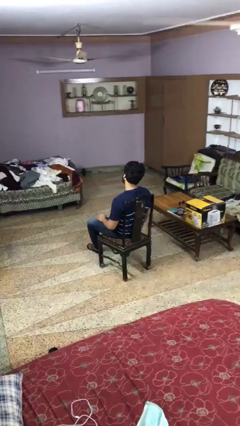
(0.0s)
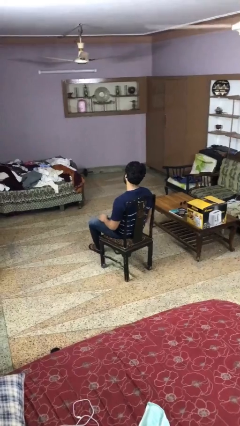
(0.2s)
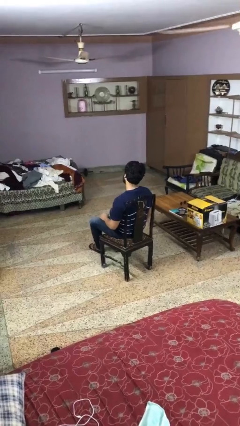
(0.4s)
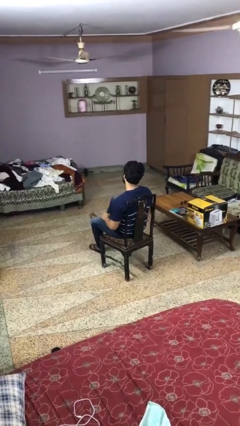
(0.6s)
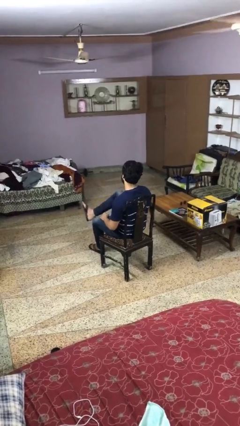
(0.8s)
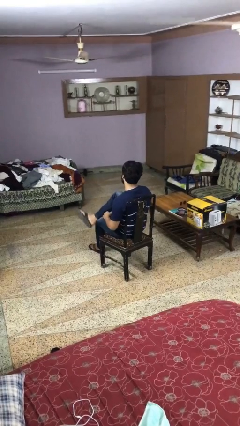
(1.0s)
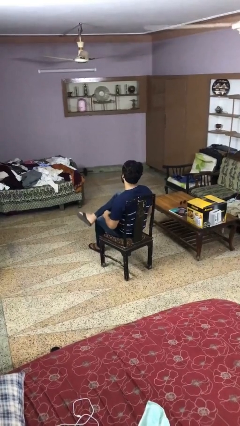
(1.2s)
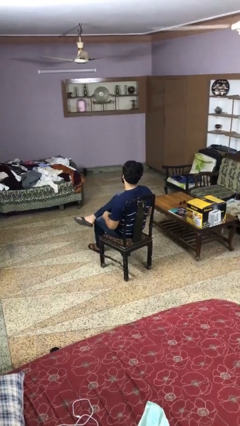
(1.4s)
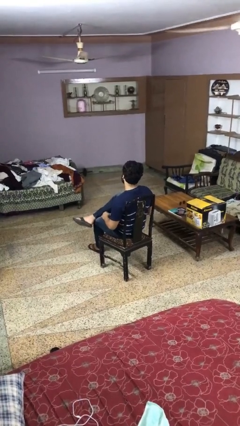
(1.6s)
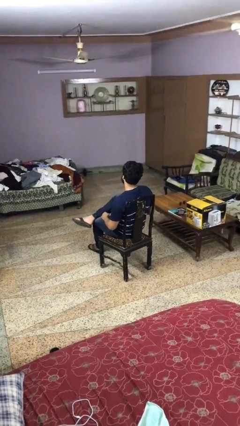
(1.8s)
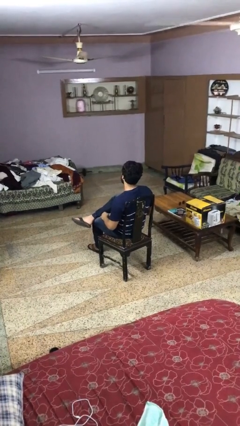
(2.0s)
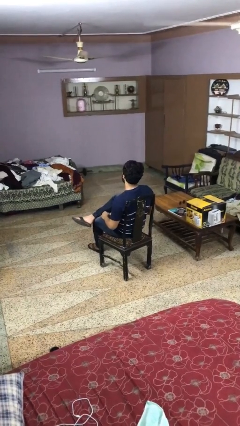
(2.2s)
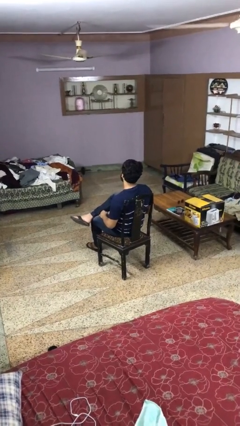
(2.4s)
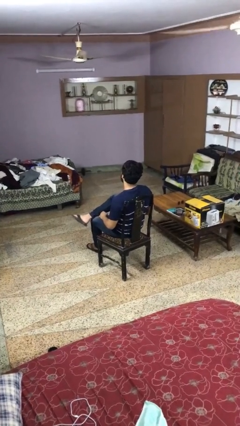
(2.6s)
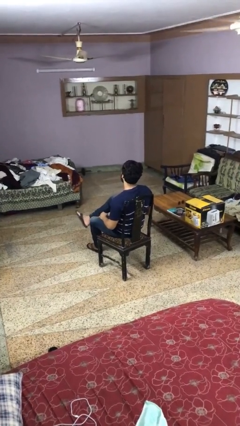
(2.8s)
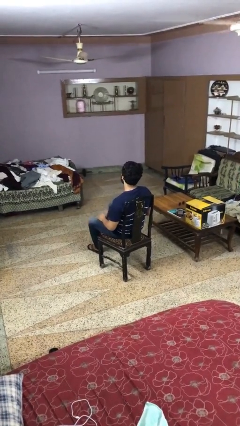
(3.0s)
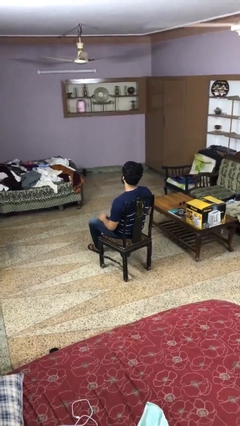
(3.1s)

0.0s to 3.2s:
person crosses legs

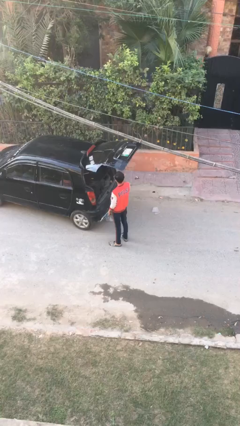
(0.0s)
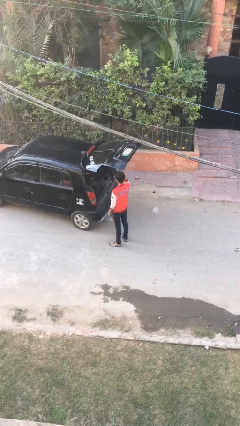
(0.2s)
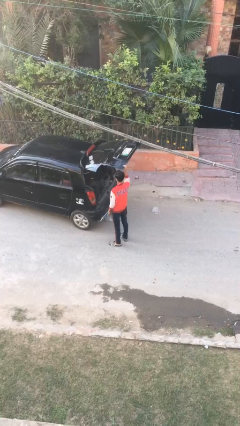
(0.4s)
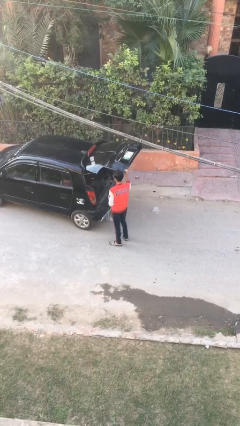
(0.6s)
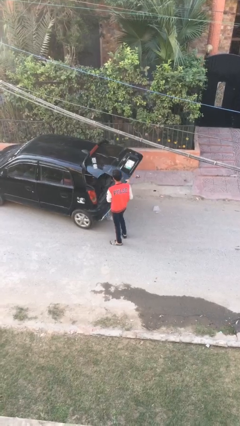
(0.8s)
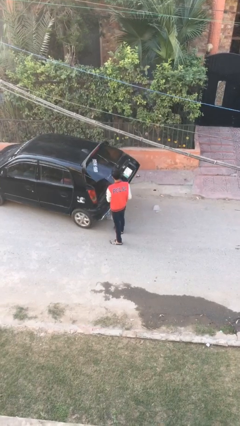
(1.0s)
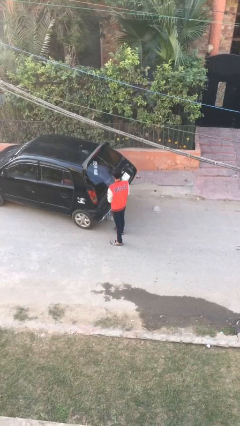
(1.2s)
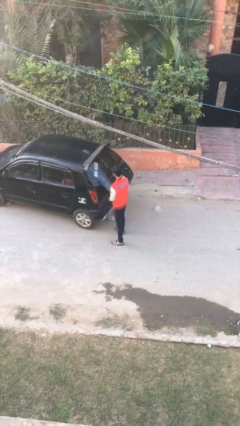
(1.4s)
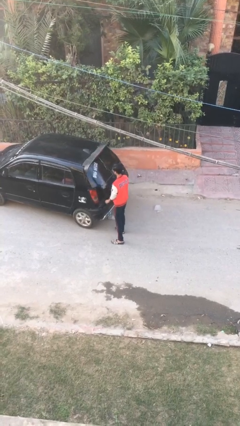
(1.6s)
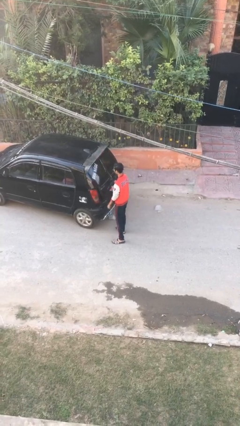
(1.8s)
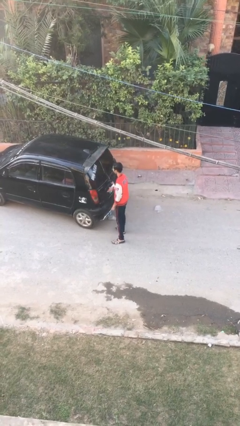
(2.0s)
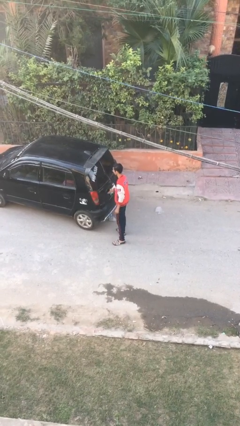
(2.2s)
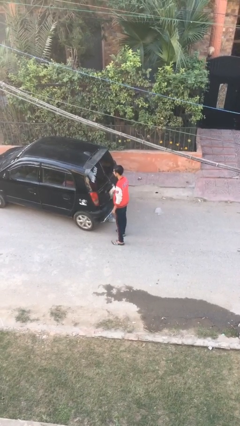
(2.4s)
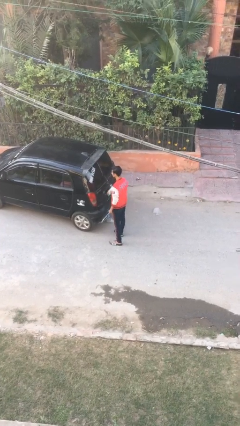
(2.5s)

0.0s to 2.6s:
person closes car trunk

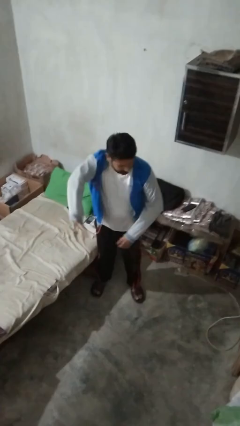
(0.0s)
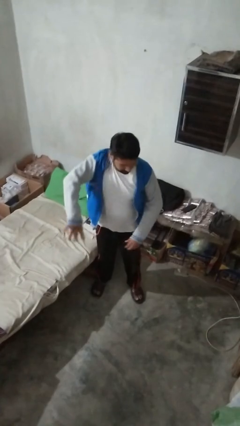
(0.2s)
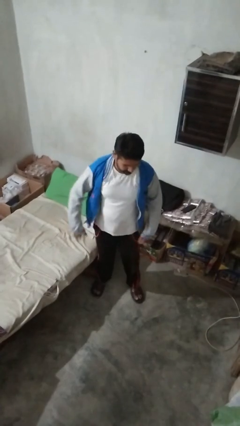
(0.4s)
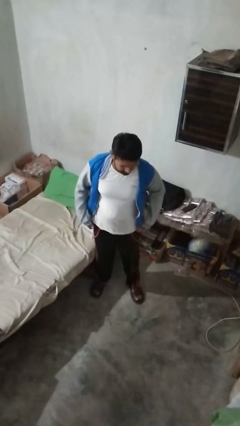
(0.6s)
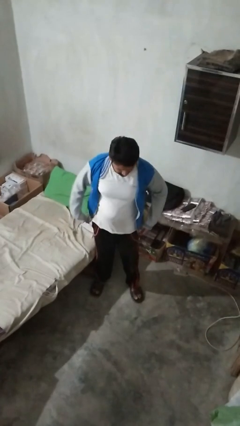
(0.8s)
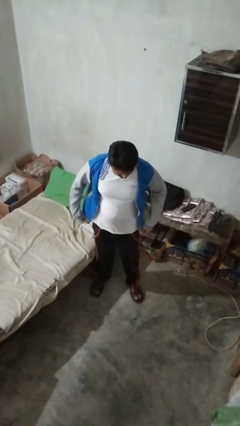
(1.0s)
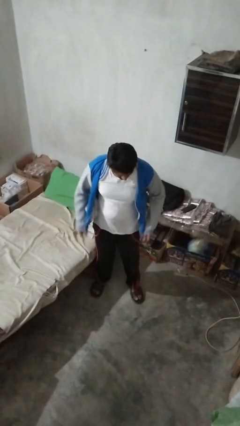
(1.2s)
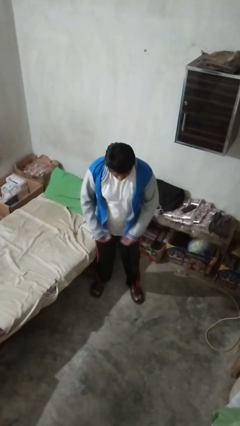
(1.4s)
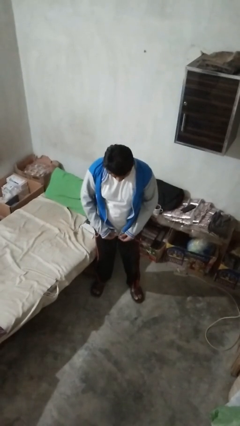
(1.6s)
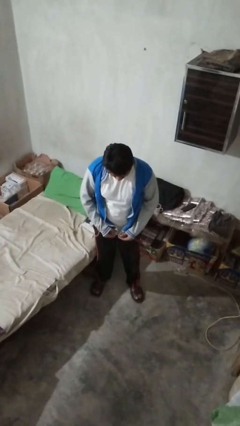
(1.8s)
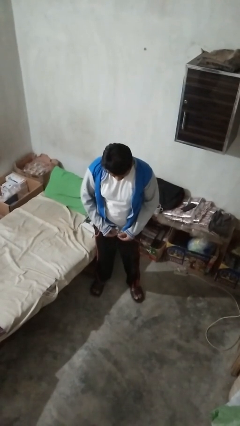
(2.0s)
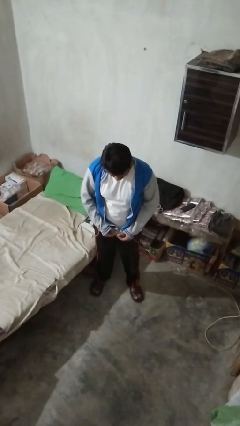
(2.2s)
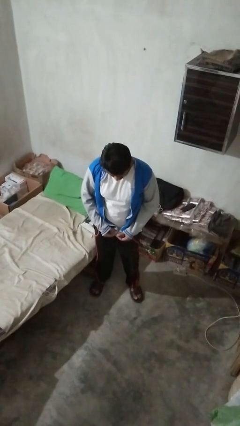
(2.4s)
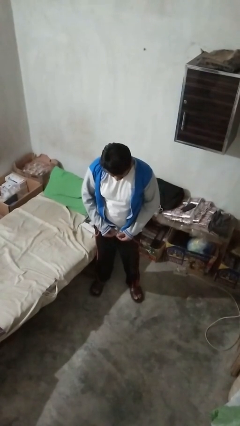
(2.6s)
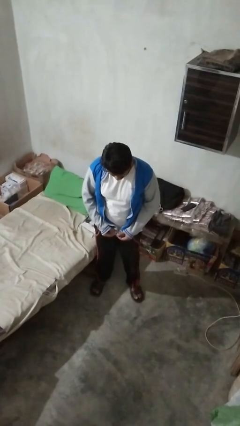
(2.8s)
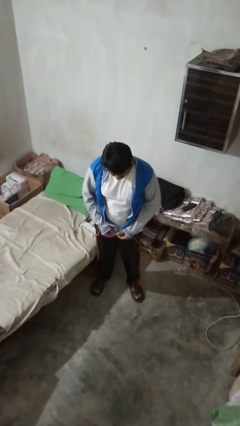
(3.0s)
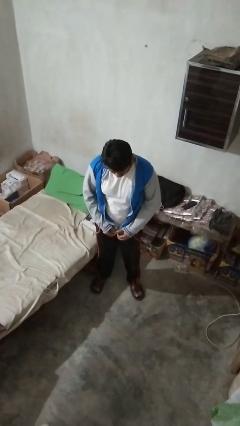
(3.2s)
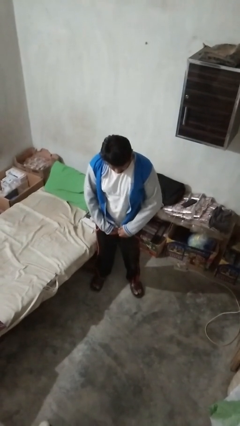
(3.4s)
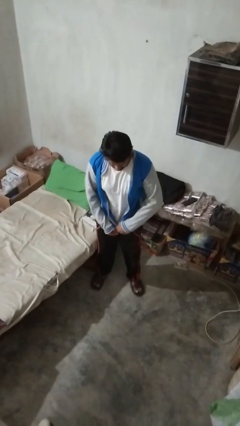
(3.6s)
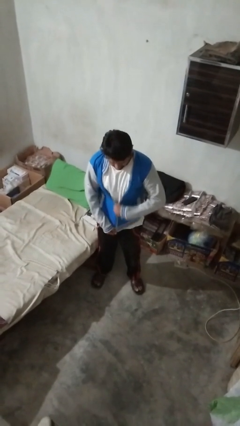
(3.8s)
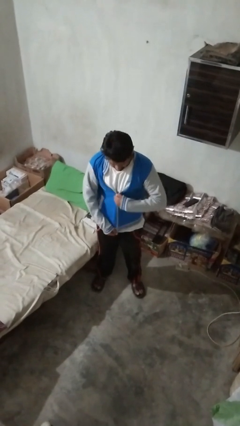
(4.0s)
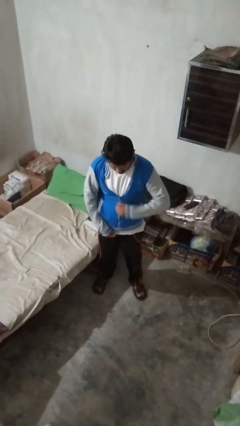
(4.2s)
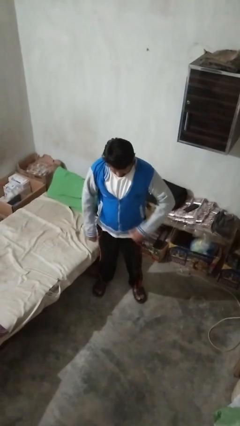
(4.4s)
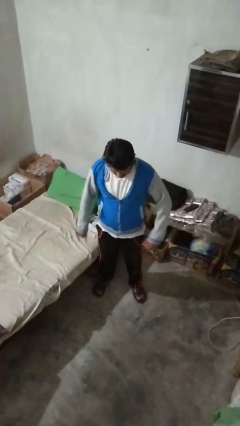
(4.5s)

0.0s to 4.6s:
person zips up jacket

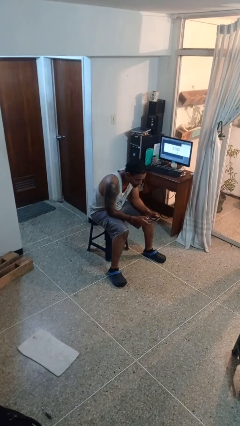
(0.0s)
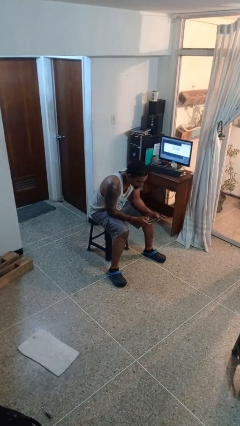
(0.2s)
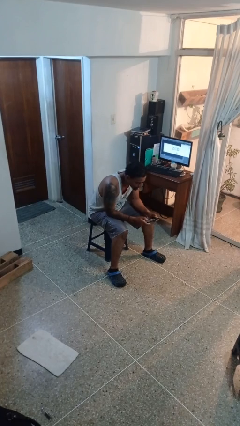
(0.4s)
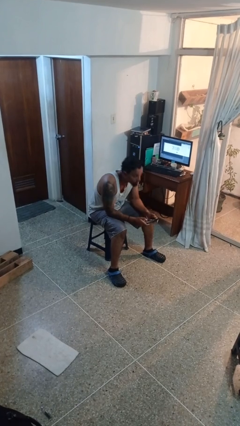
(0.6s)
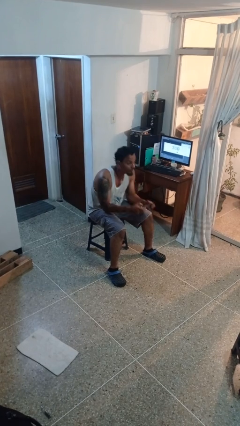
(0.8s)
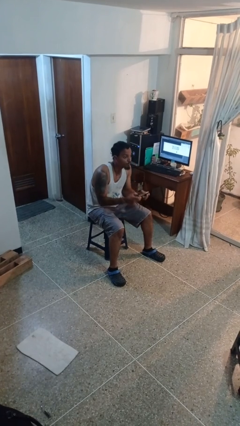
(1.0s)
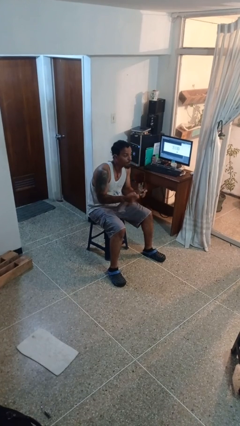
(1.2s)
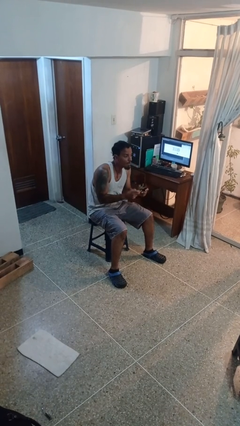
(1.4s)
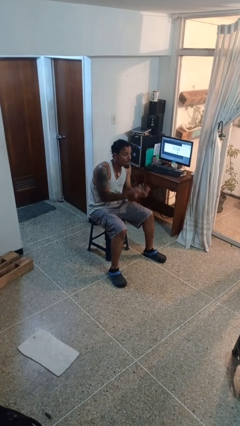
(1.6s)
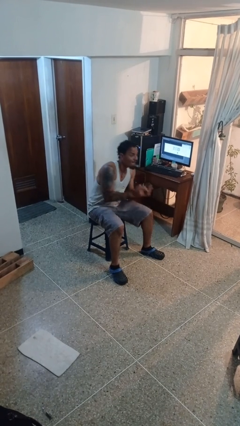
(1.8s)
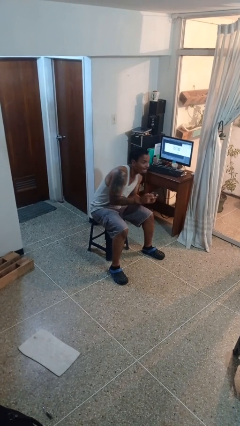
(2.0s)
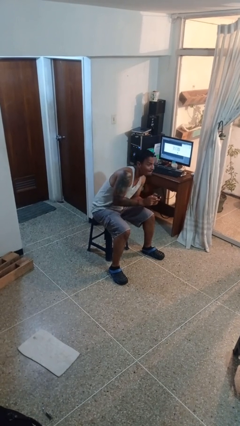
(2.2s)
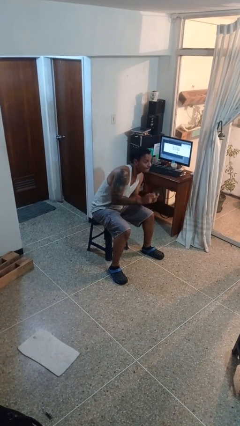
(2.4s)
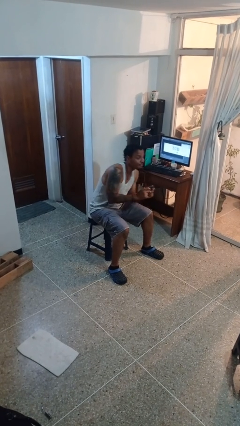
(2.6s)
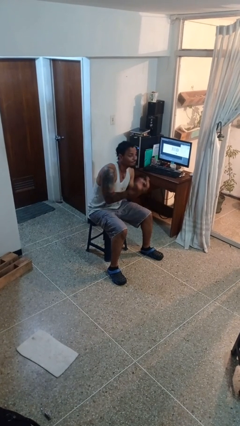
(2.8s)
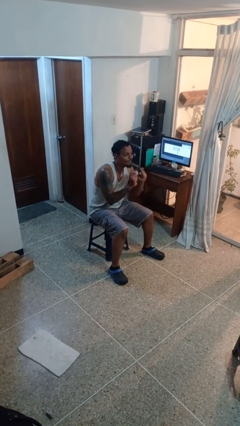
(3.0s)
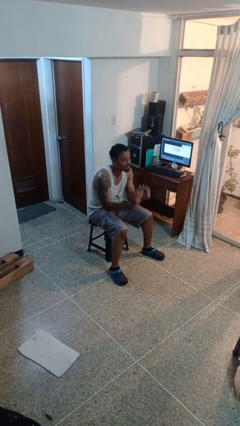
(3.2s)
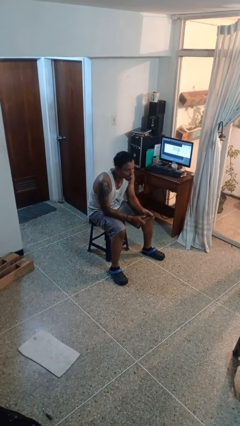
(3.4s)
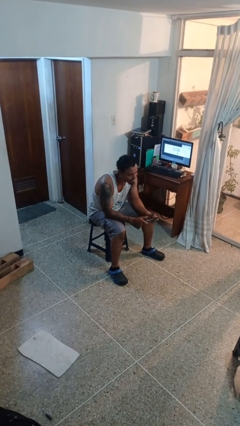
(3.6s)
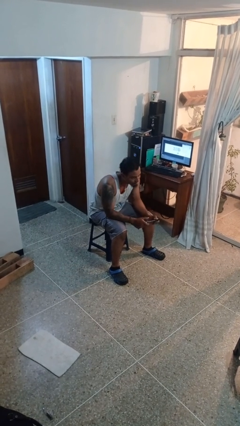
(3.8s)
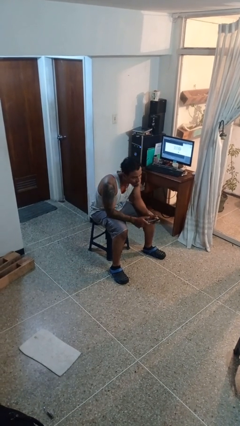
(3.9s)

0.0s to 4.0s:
person interacts with handheld game

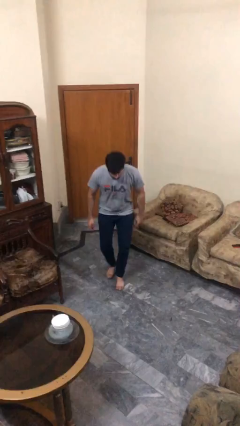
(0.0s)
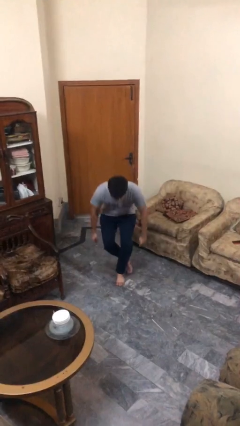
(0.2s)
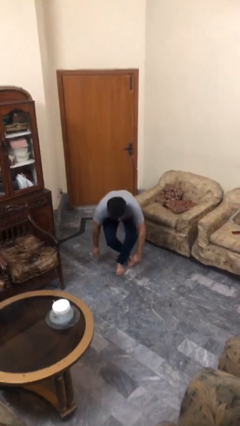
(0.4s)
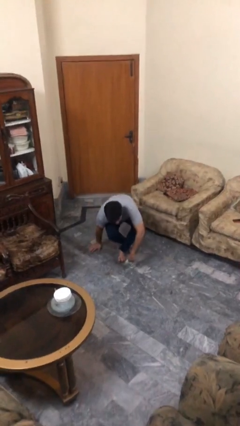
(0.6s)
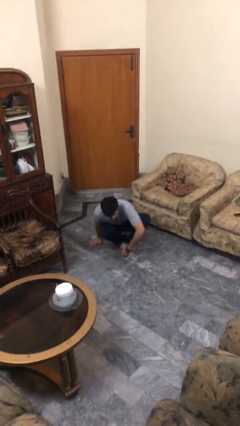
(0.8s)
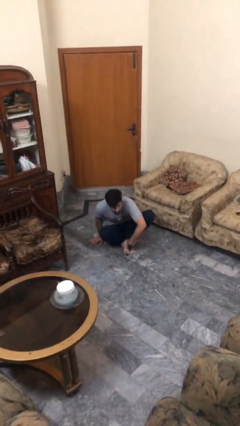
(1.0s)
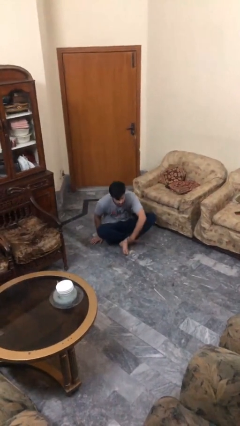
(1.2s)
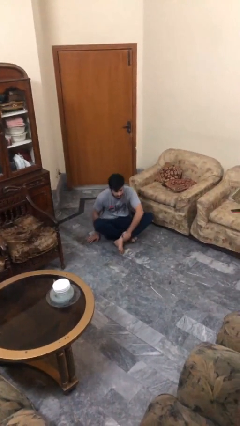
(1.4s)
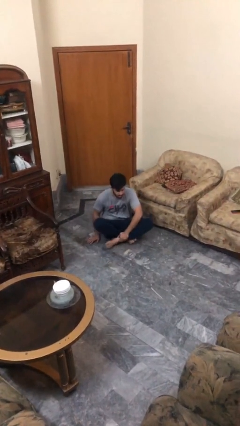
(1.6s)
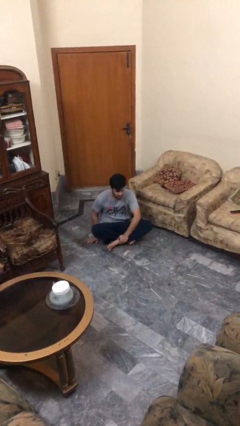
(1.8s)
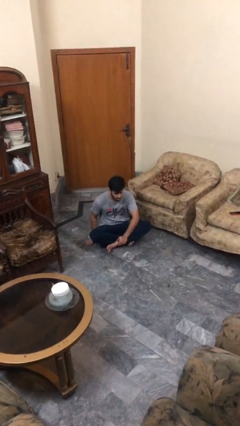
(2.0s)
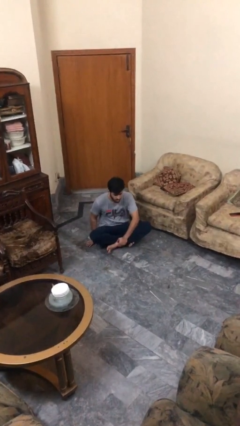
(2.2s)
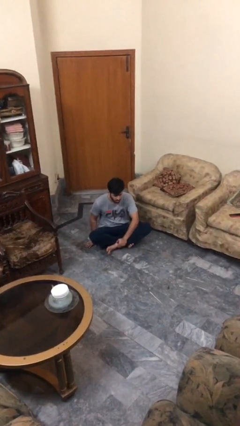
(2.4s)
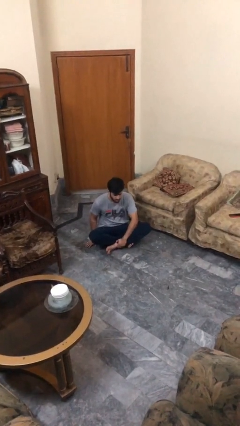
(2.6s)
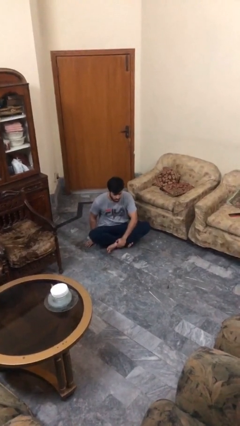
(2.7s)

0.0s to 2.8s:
person sits crisscross

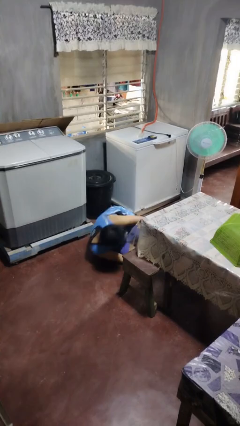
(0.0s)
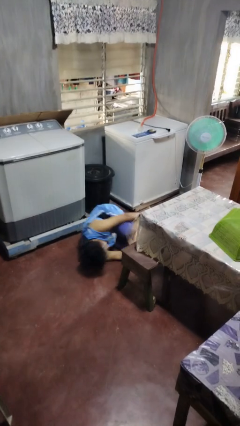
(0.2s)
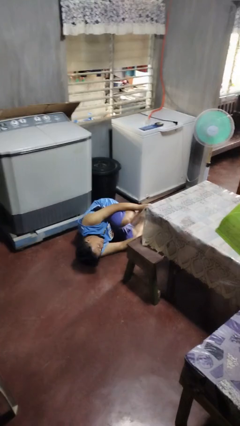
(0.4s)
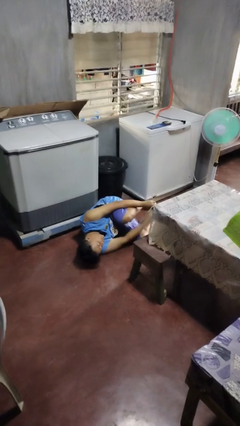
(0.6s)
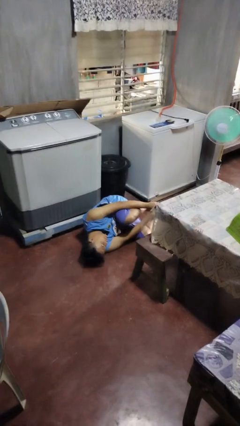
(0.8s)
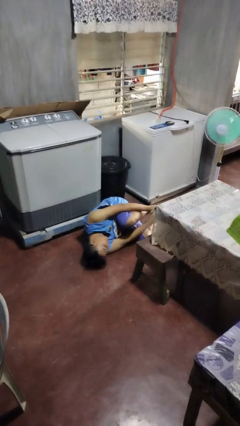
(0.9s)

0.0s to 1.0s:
person lies down on floor
